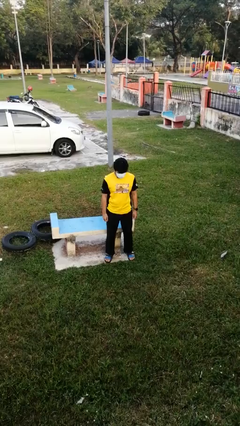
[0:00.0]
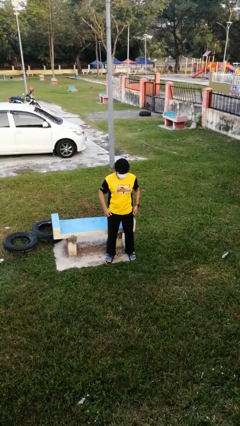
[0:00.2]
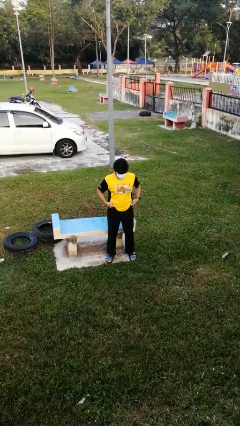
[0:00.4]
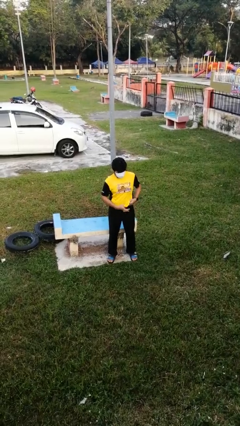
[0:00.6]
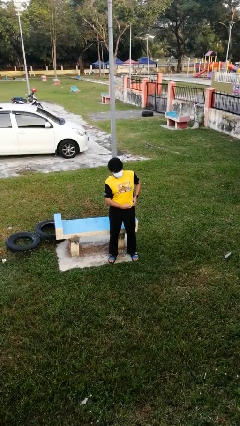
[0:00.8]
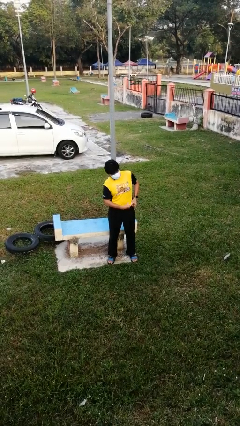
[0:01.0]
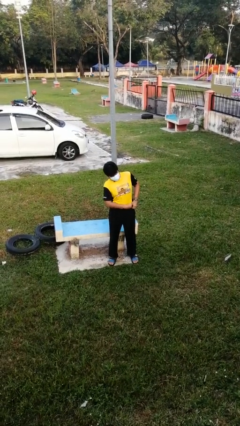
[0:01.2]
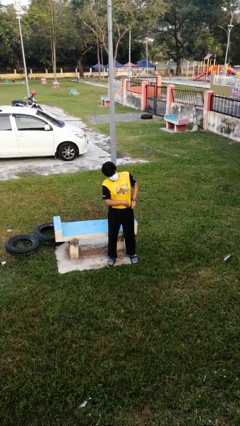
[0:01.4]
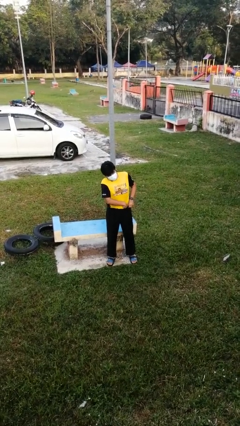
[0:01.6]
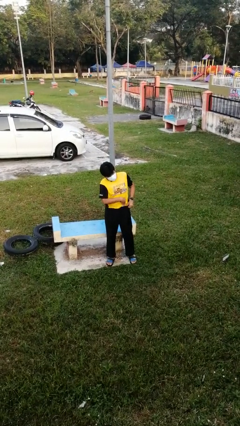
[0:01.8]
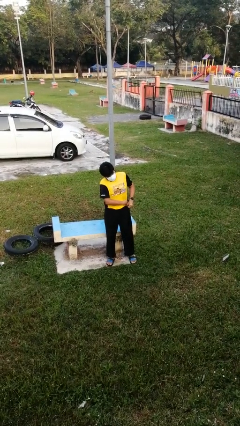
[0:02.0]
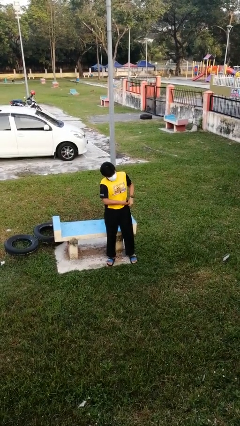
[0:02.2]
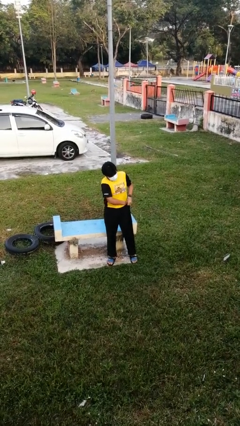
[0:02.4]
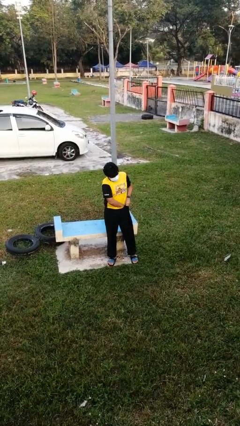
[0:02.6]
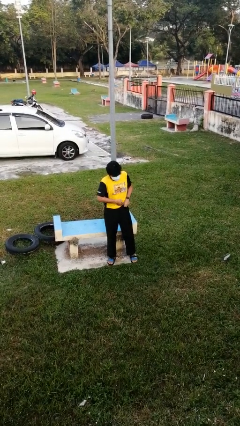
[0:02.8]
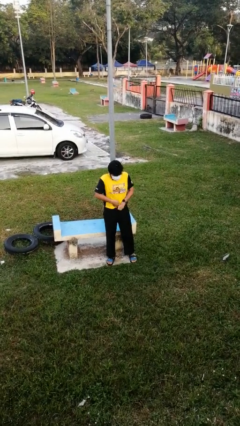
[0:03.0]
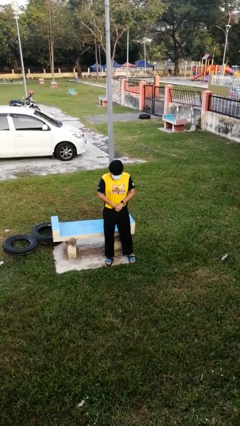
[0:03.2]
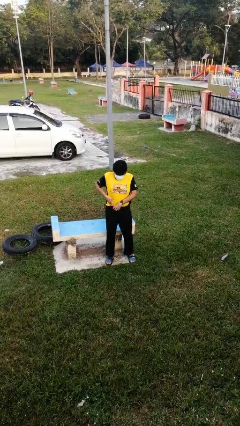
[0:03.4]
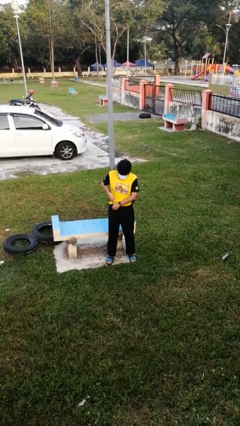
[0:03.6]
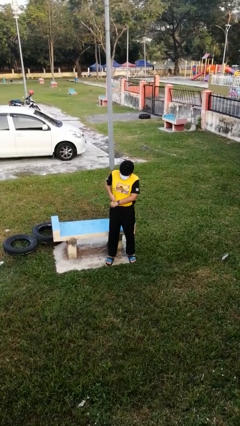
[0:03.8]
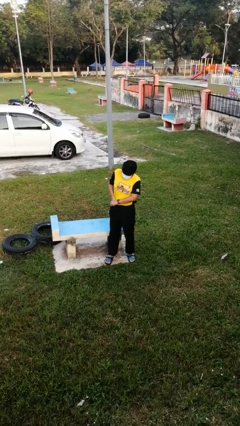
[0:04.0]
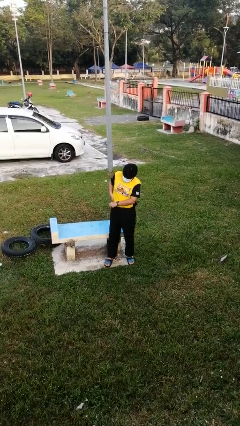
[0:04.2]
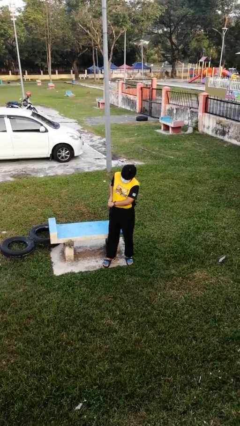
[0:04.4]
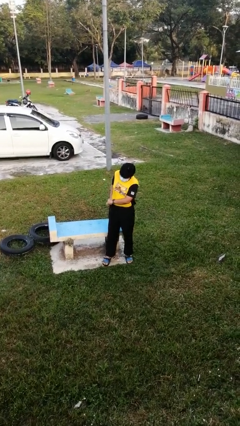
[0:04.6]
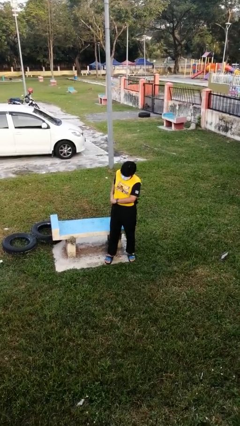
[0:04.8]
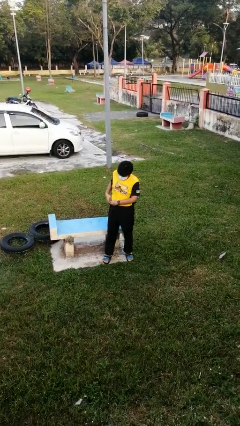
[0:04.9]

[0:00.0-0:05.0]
person tucks in shirt

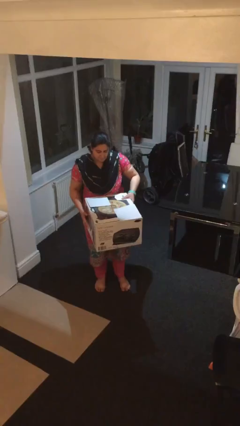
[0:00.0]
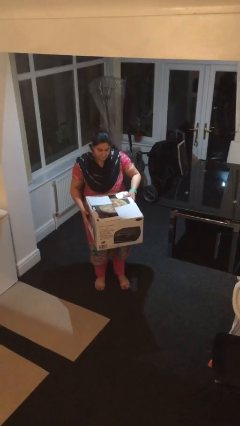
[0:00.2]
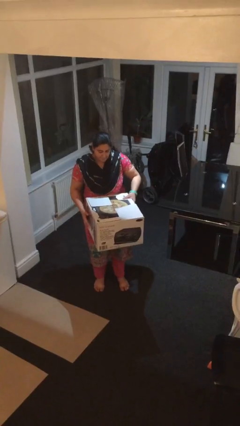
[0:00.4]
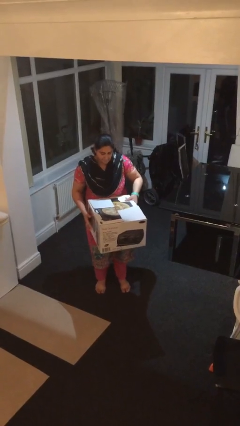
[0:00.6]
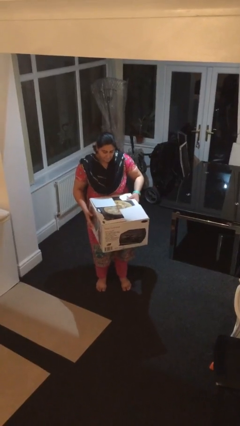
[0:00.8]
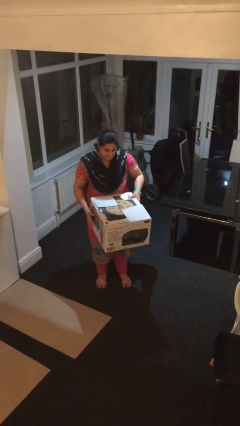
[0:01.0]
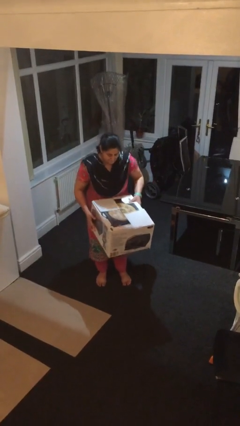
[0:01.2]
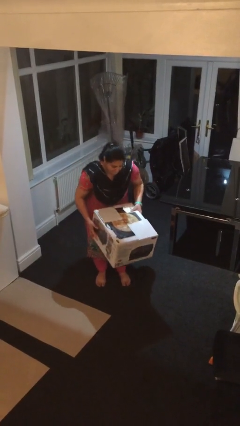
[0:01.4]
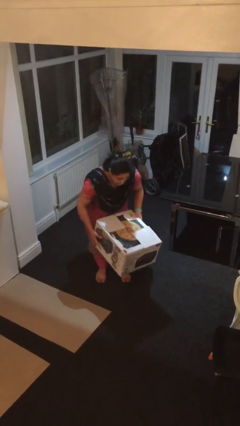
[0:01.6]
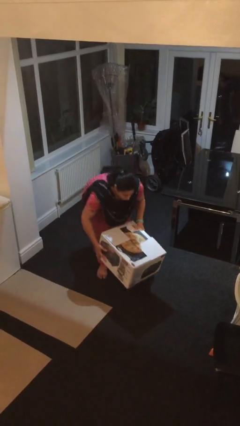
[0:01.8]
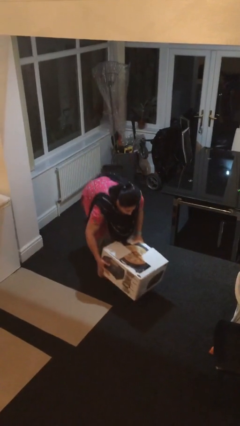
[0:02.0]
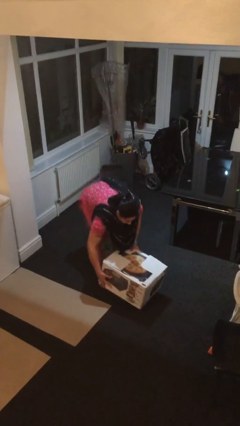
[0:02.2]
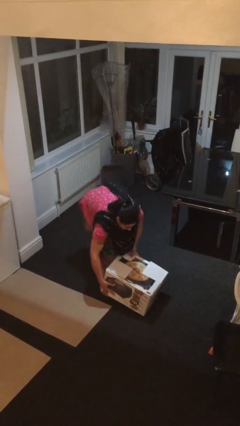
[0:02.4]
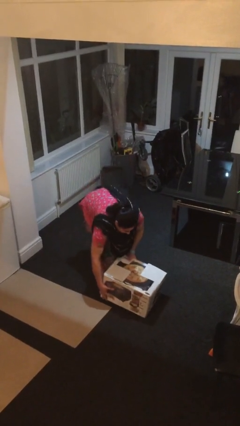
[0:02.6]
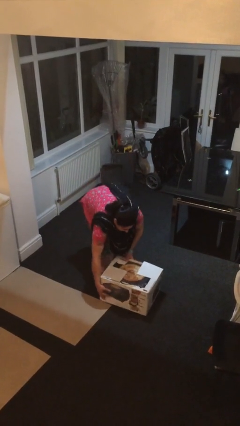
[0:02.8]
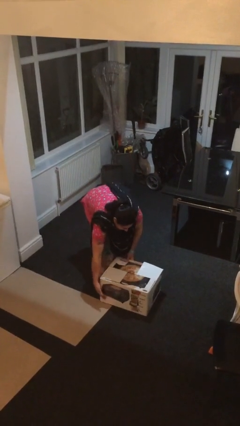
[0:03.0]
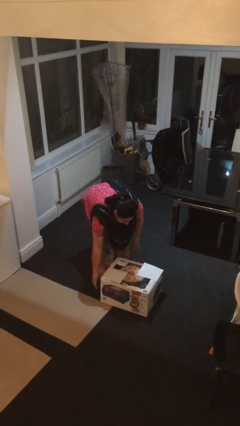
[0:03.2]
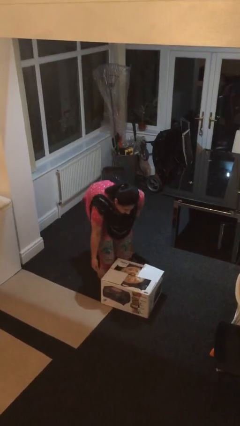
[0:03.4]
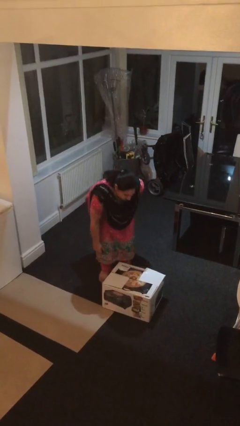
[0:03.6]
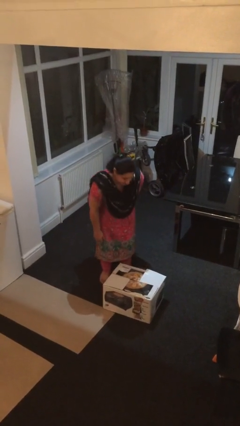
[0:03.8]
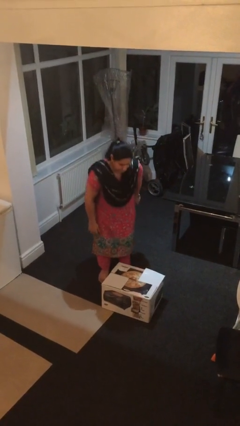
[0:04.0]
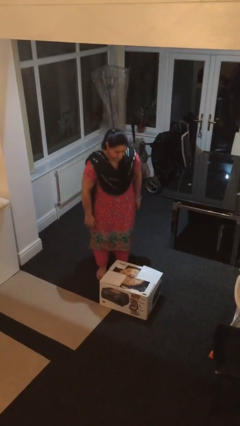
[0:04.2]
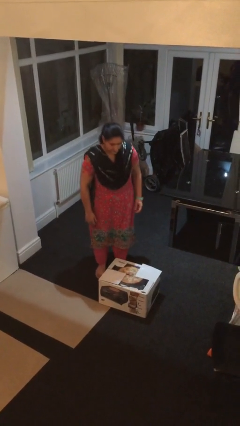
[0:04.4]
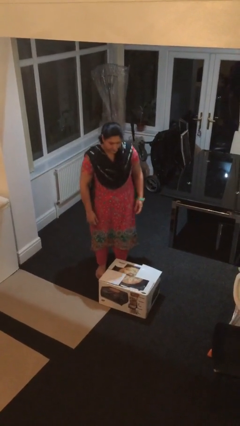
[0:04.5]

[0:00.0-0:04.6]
person puts down object on floor

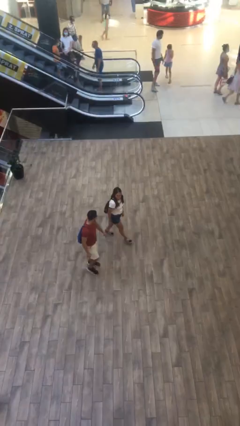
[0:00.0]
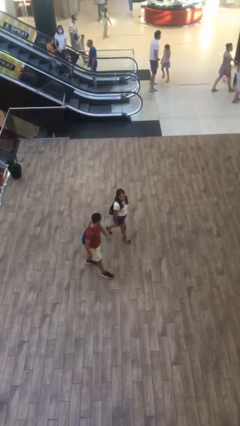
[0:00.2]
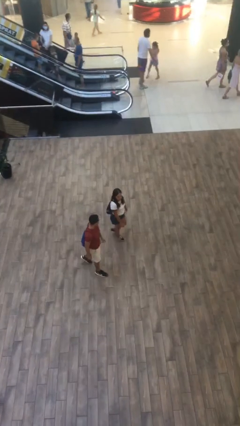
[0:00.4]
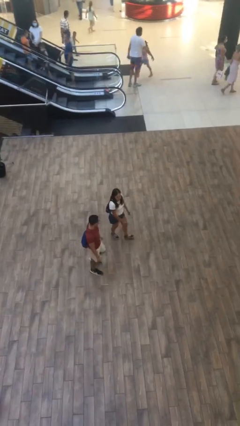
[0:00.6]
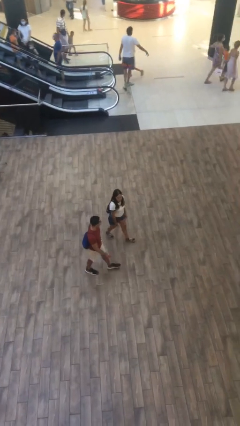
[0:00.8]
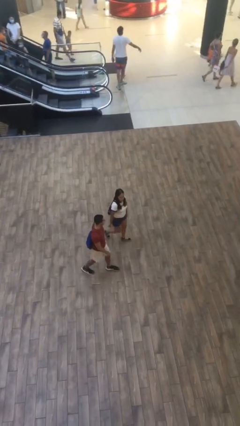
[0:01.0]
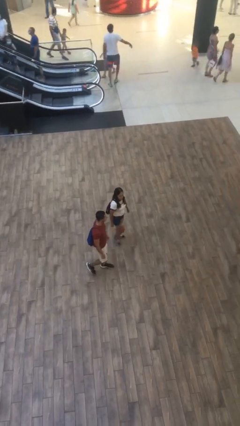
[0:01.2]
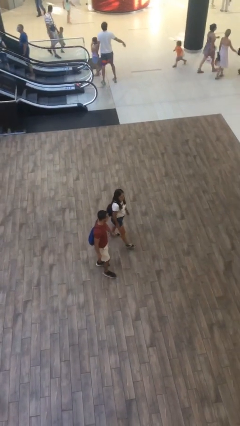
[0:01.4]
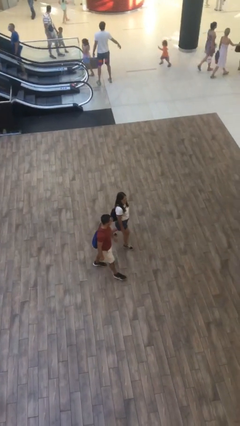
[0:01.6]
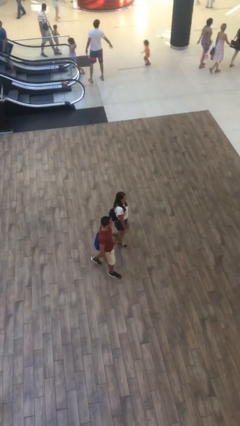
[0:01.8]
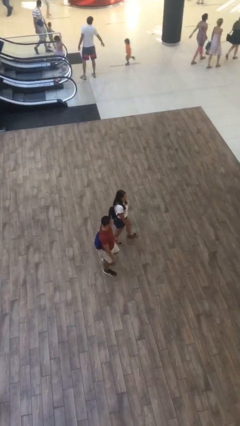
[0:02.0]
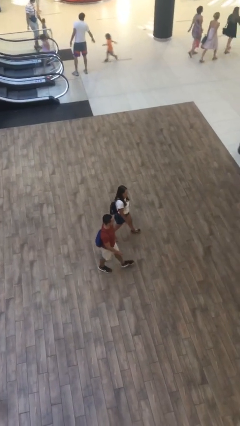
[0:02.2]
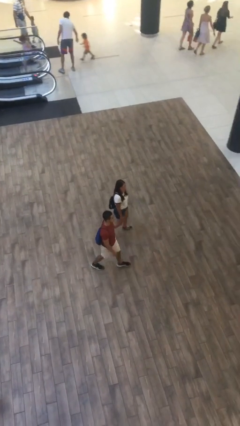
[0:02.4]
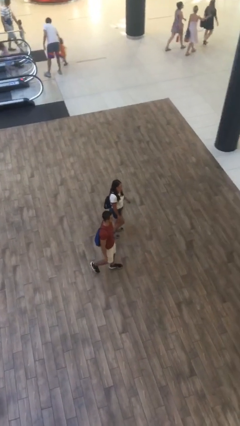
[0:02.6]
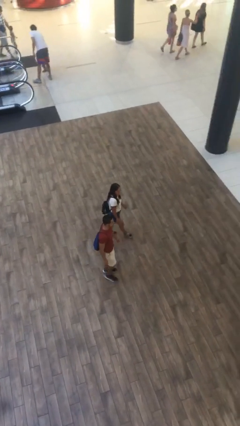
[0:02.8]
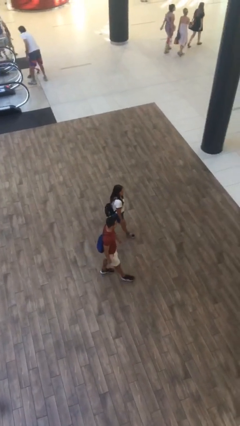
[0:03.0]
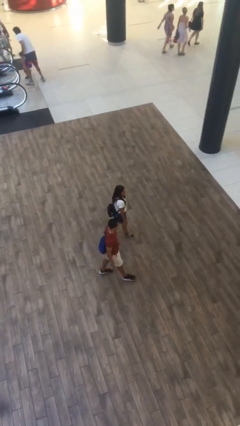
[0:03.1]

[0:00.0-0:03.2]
person talks to person

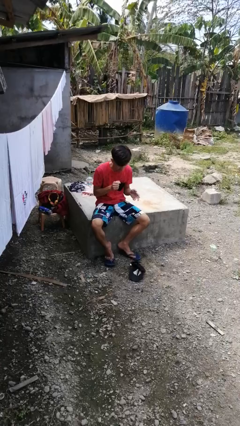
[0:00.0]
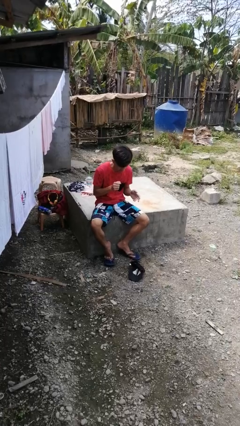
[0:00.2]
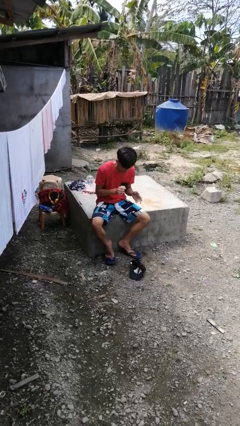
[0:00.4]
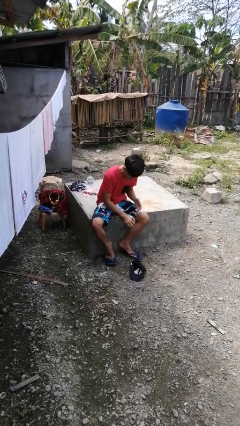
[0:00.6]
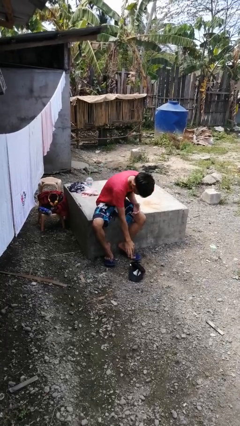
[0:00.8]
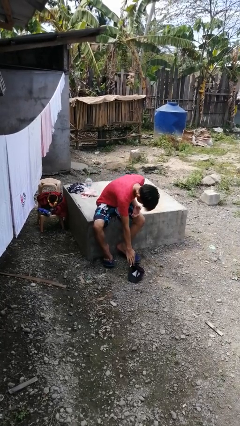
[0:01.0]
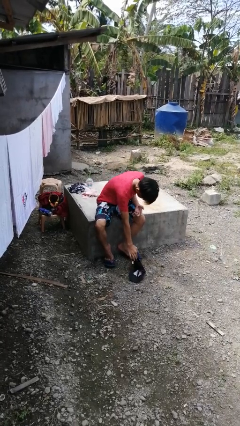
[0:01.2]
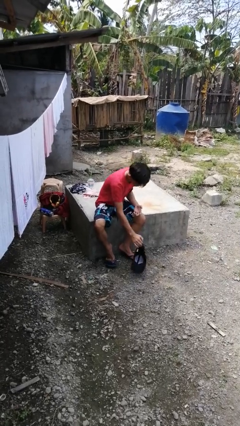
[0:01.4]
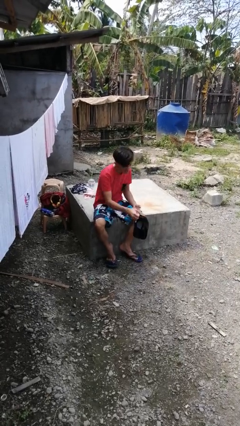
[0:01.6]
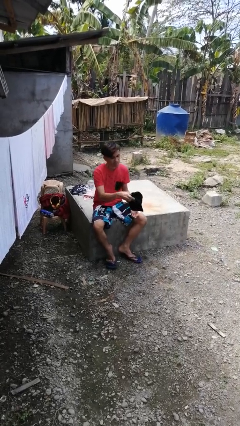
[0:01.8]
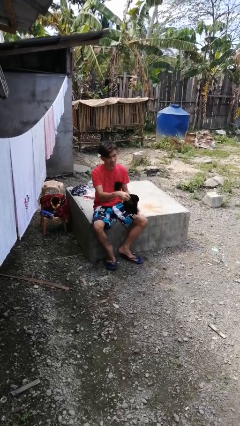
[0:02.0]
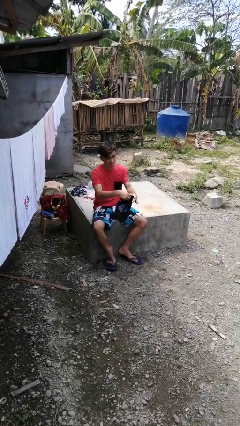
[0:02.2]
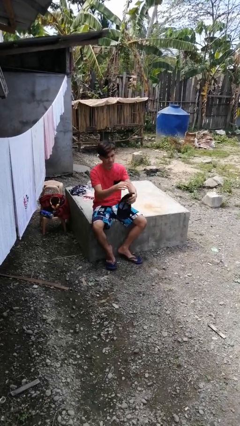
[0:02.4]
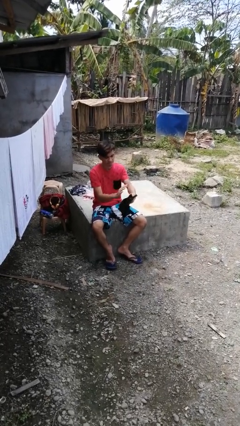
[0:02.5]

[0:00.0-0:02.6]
person picks up object from floor

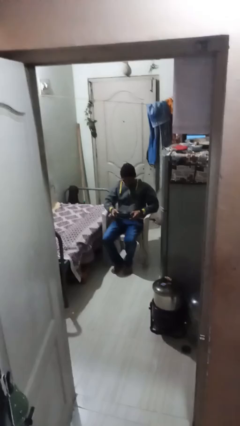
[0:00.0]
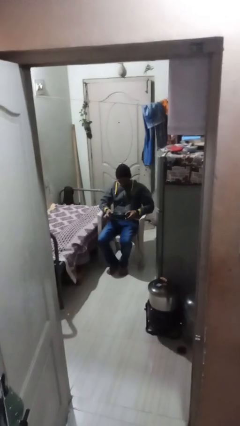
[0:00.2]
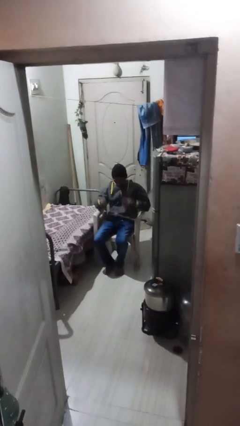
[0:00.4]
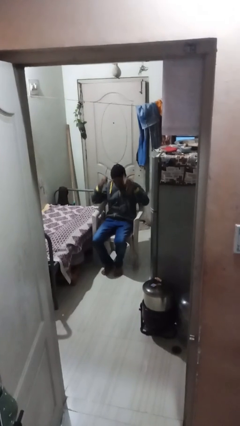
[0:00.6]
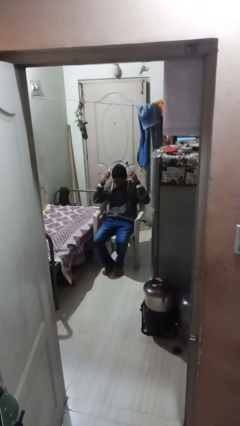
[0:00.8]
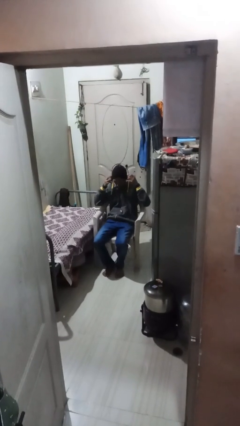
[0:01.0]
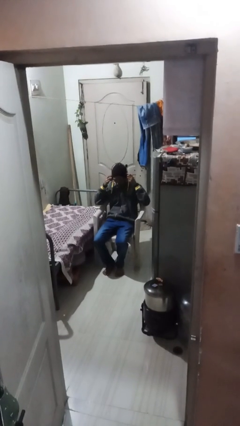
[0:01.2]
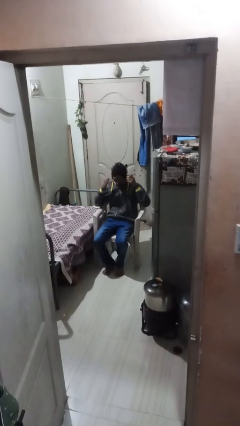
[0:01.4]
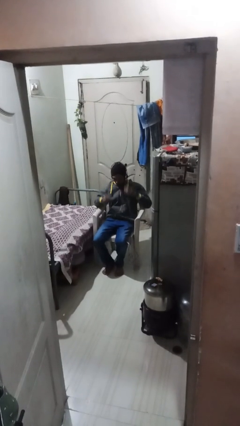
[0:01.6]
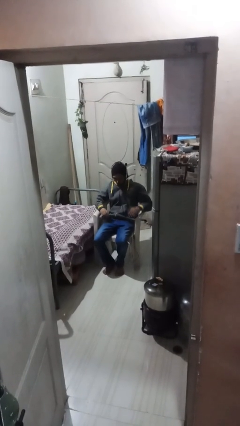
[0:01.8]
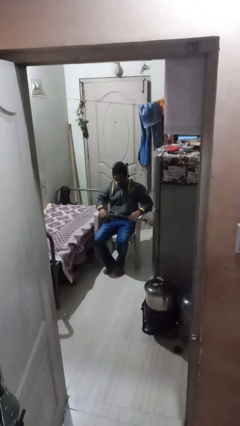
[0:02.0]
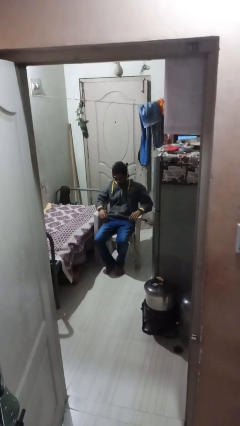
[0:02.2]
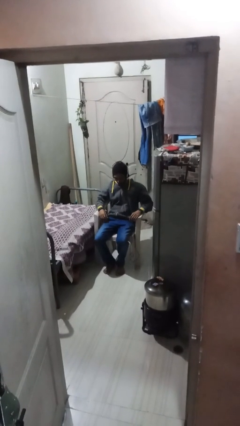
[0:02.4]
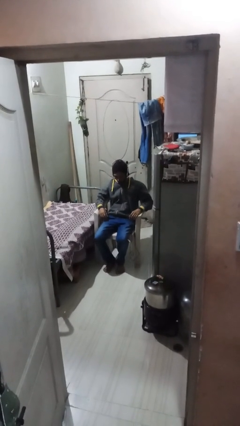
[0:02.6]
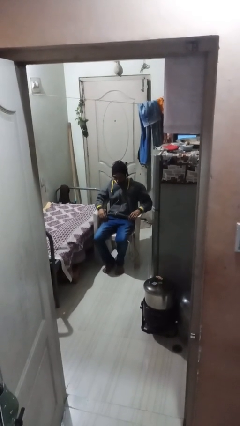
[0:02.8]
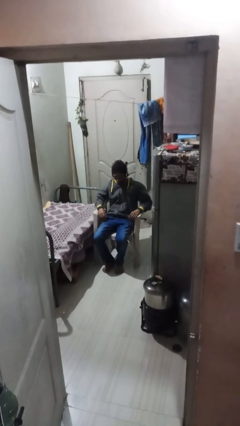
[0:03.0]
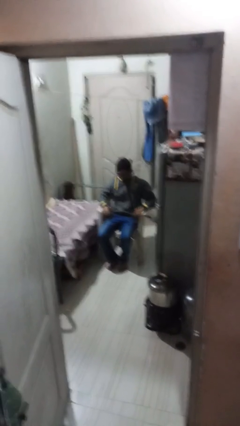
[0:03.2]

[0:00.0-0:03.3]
person puts on headphones
